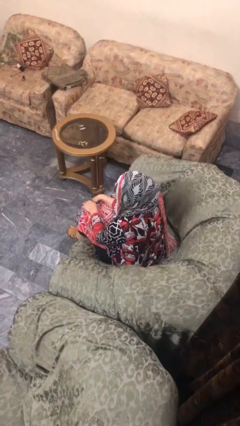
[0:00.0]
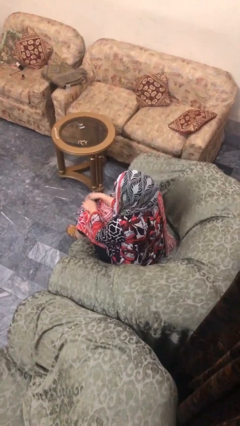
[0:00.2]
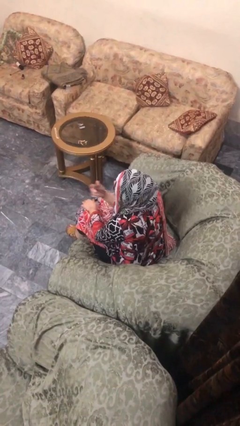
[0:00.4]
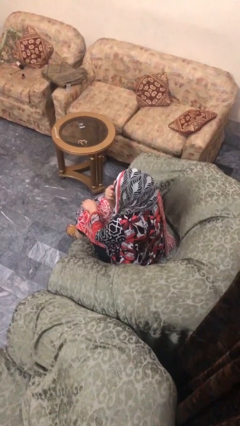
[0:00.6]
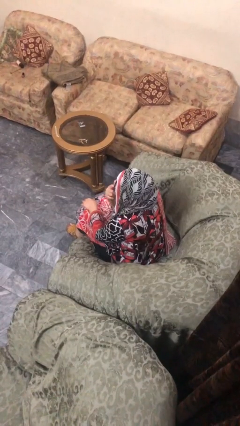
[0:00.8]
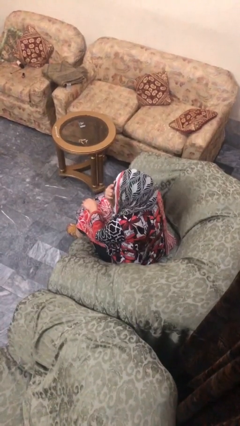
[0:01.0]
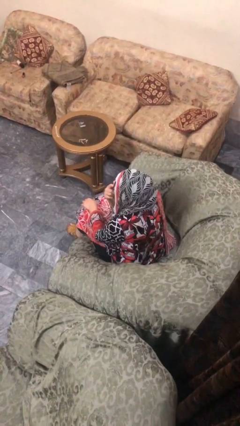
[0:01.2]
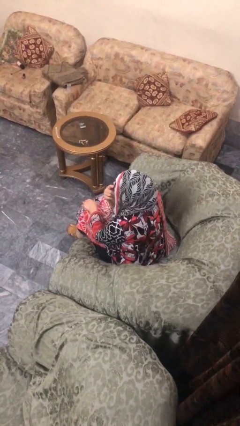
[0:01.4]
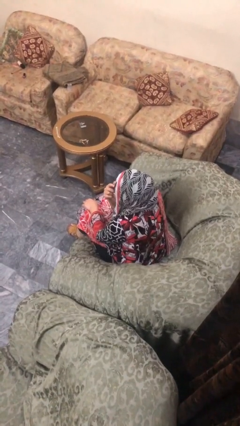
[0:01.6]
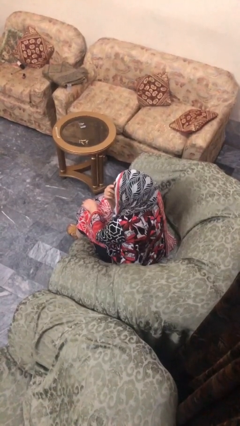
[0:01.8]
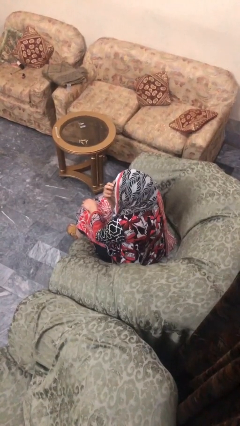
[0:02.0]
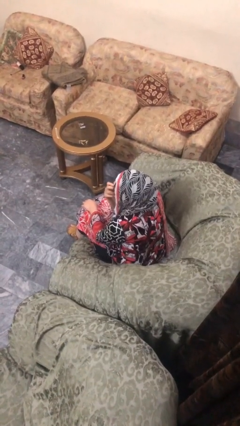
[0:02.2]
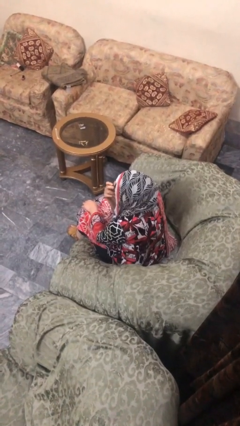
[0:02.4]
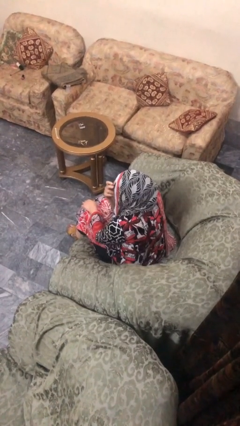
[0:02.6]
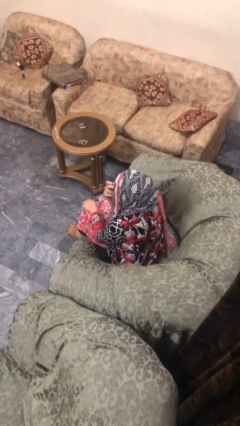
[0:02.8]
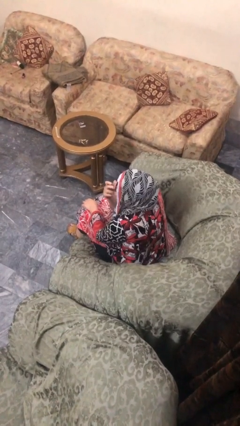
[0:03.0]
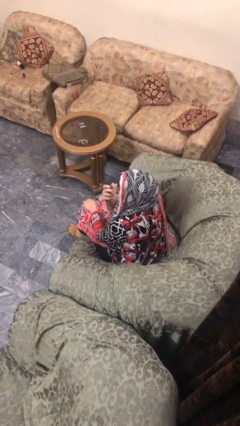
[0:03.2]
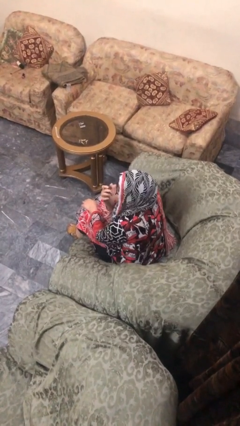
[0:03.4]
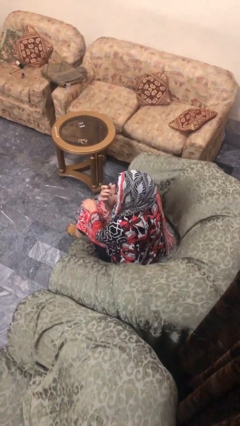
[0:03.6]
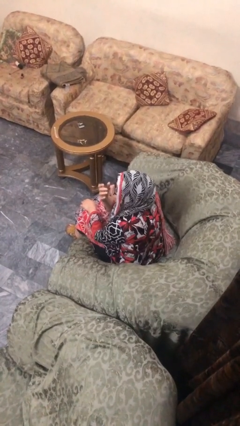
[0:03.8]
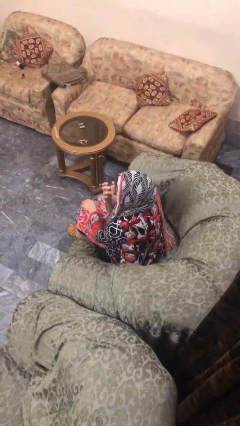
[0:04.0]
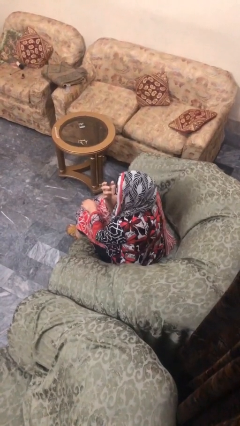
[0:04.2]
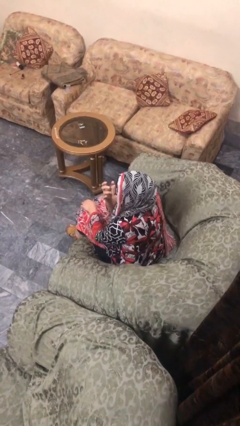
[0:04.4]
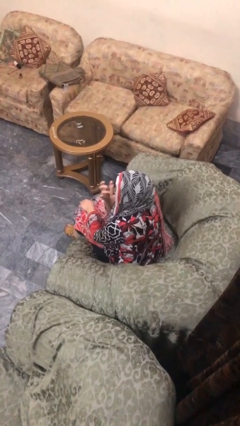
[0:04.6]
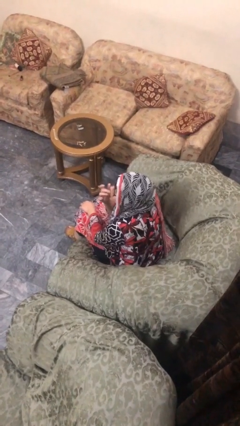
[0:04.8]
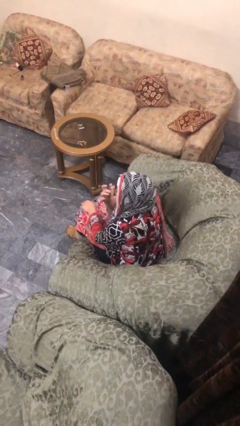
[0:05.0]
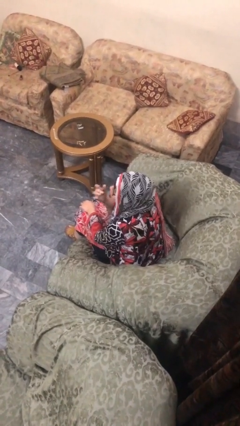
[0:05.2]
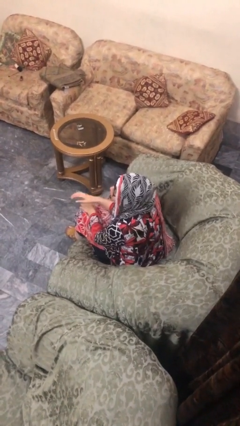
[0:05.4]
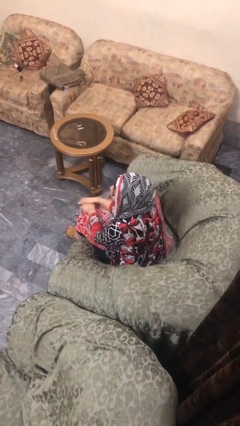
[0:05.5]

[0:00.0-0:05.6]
person licks fingers

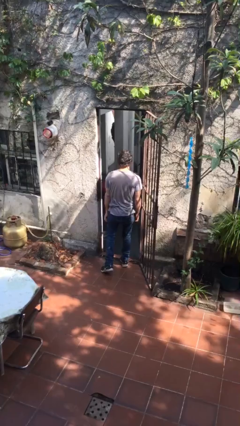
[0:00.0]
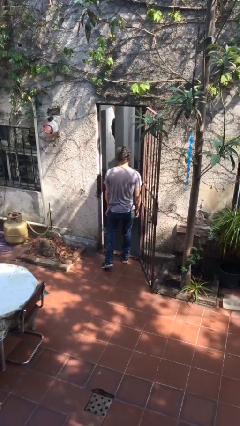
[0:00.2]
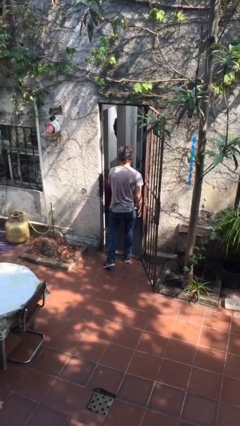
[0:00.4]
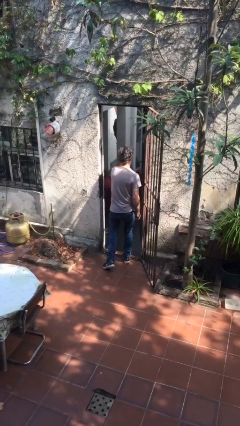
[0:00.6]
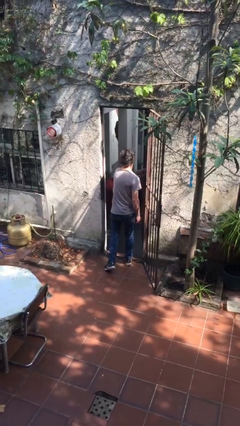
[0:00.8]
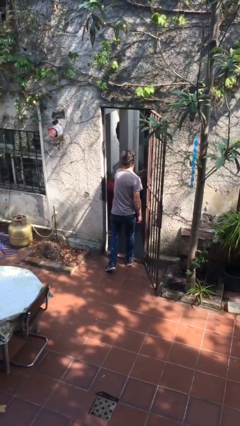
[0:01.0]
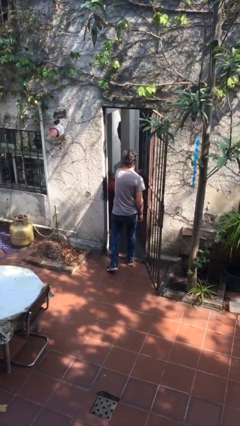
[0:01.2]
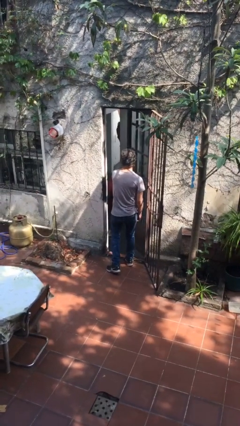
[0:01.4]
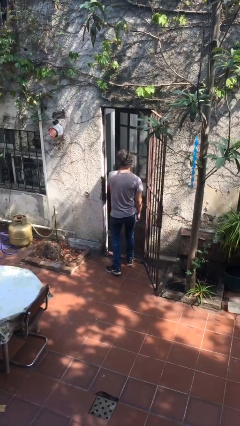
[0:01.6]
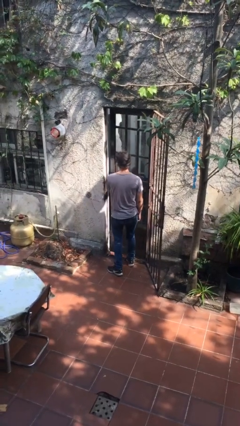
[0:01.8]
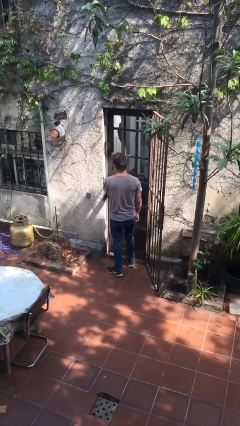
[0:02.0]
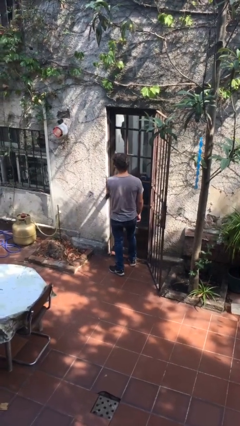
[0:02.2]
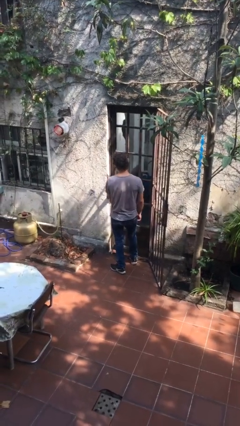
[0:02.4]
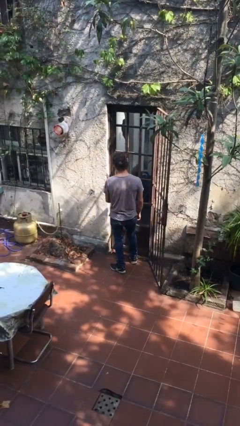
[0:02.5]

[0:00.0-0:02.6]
person closes facility door

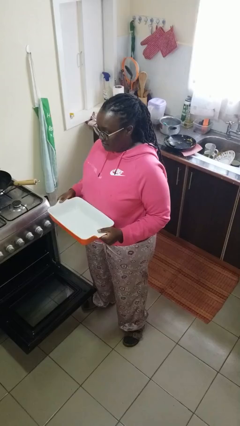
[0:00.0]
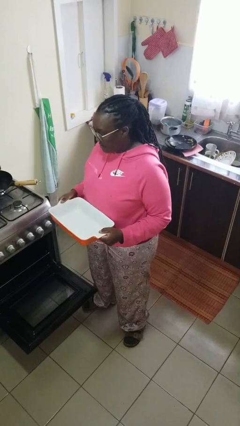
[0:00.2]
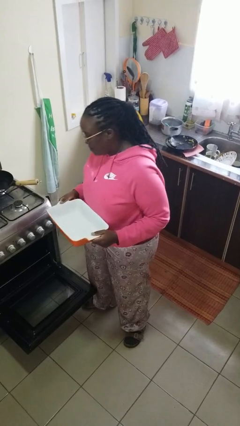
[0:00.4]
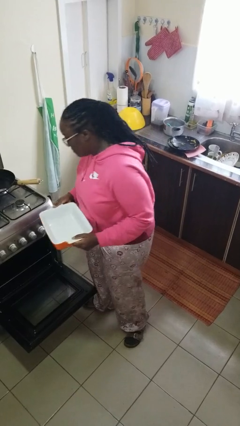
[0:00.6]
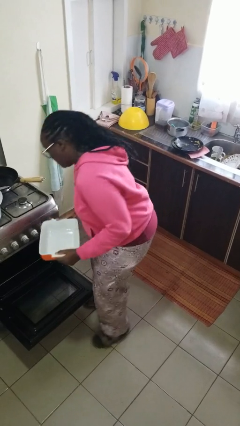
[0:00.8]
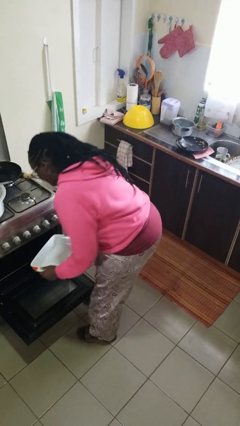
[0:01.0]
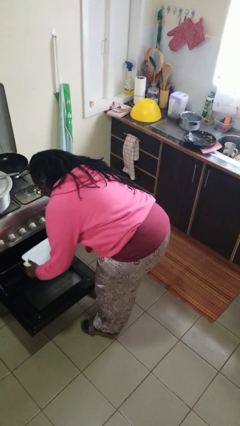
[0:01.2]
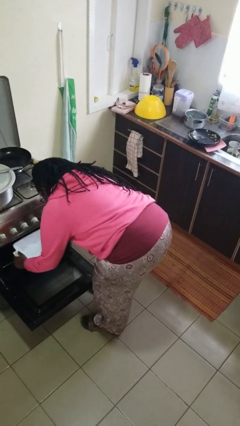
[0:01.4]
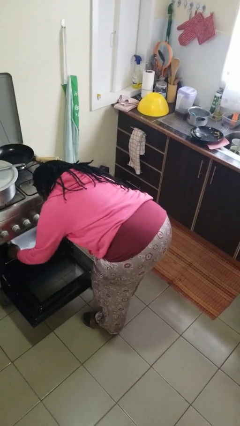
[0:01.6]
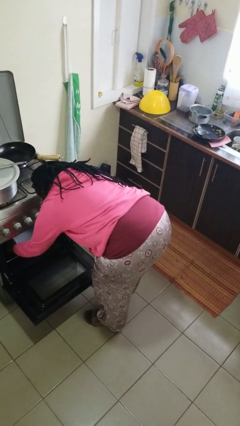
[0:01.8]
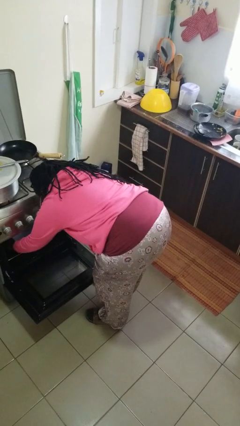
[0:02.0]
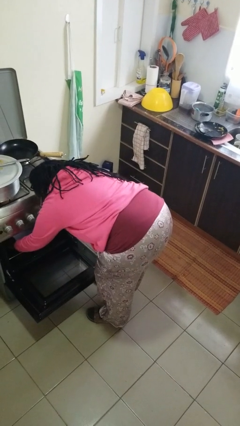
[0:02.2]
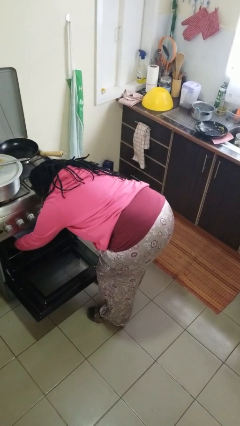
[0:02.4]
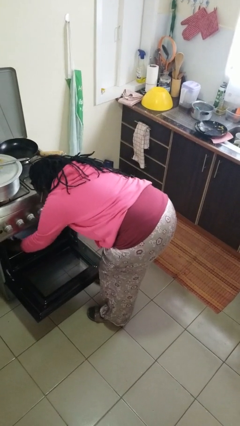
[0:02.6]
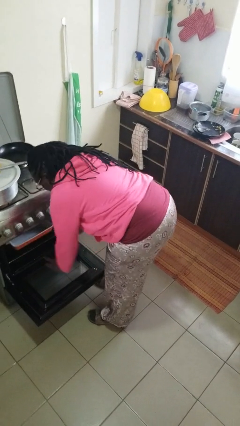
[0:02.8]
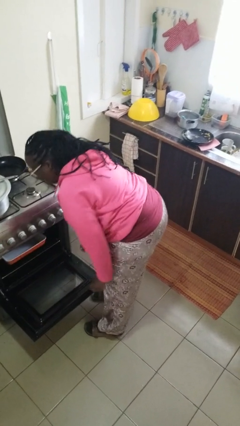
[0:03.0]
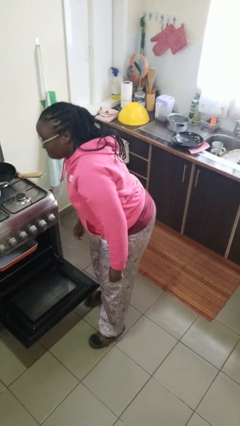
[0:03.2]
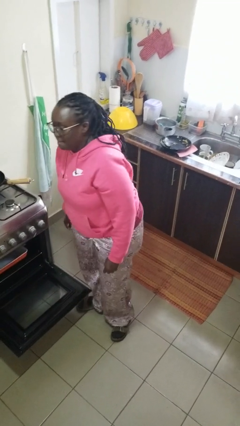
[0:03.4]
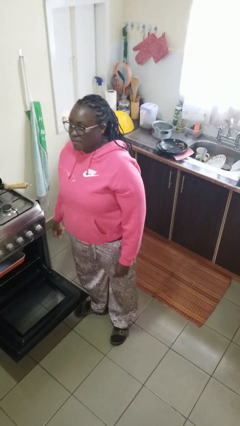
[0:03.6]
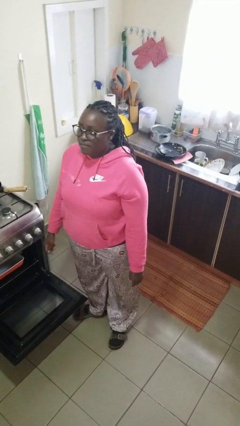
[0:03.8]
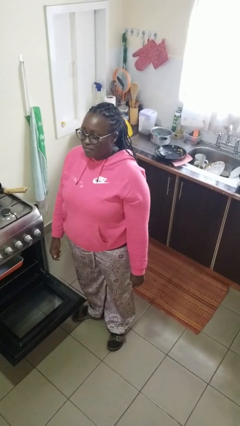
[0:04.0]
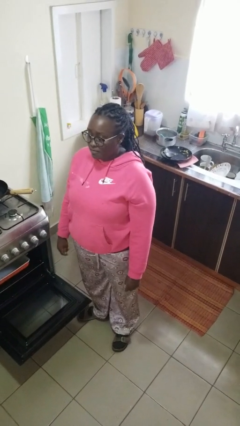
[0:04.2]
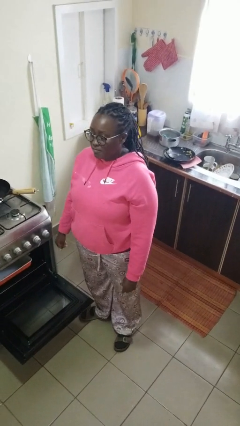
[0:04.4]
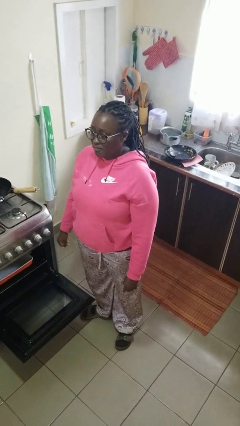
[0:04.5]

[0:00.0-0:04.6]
person puts object into oven

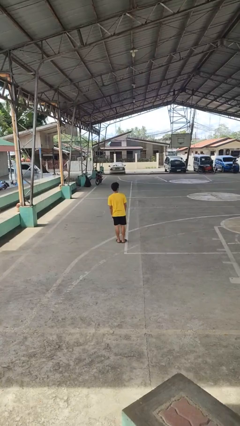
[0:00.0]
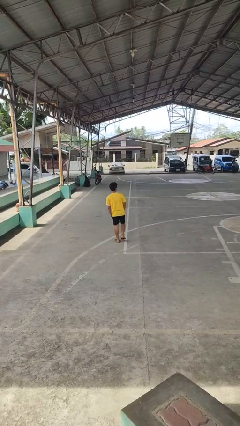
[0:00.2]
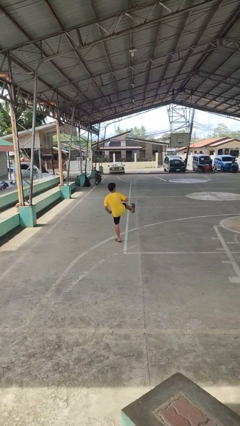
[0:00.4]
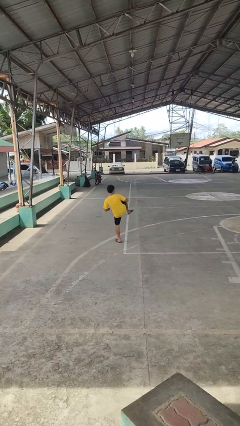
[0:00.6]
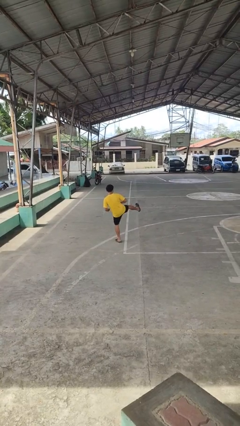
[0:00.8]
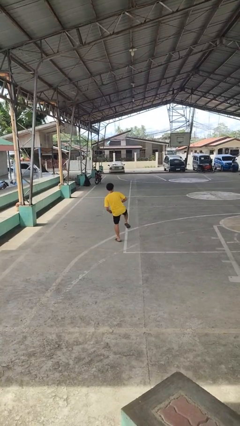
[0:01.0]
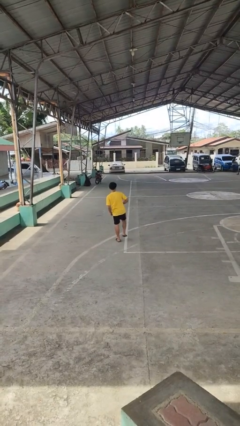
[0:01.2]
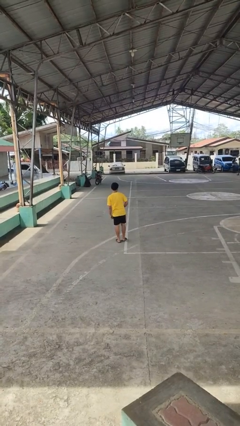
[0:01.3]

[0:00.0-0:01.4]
person karate kicks

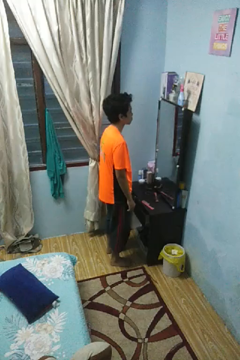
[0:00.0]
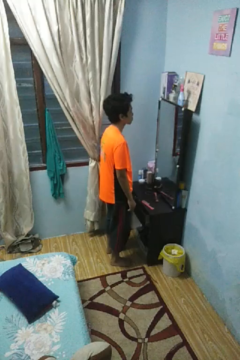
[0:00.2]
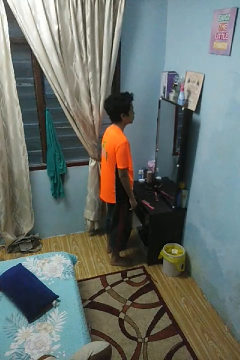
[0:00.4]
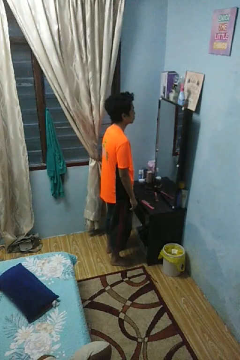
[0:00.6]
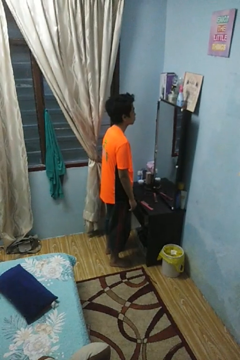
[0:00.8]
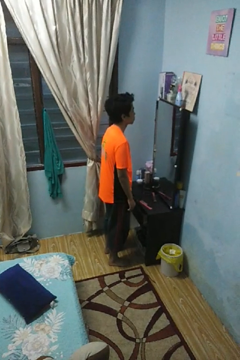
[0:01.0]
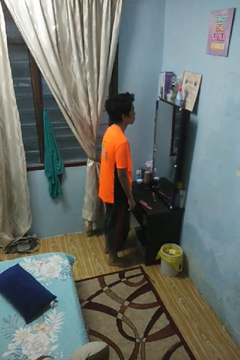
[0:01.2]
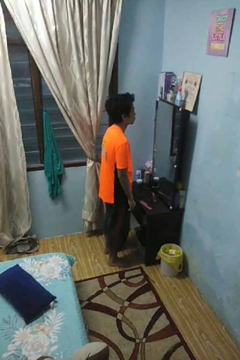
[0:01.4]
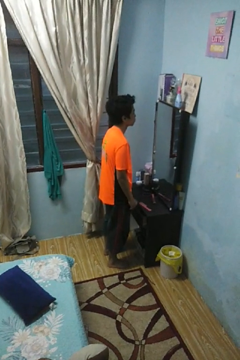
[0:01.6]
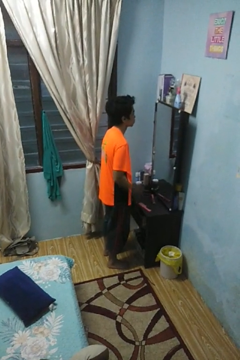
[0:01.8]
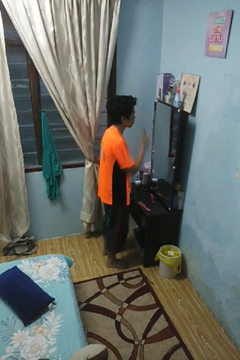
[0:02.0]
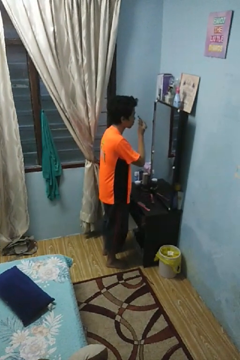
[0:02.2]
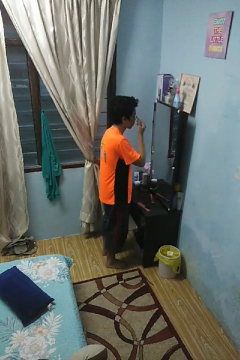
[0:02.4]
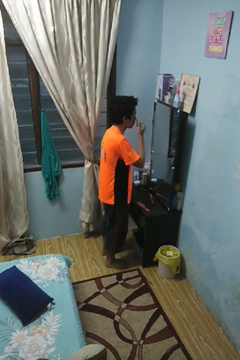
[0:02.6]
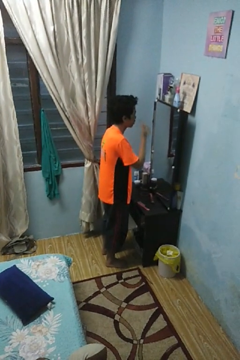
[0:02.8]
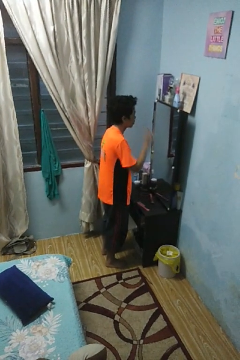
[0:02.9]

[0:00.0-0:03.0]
person applies eye makeup

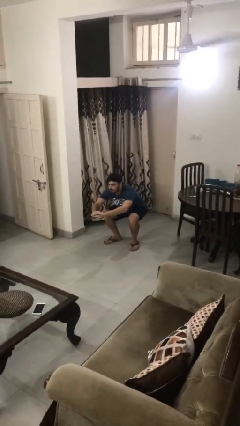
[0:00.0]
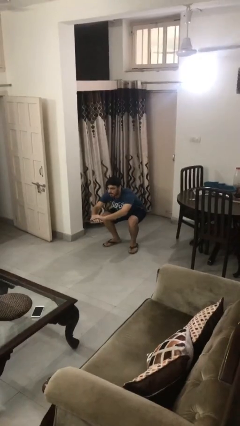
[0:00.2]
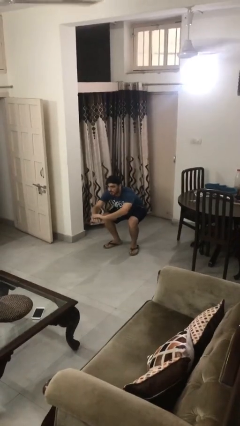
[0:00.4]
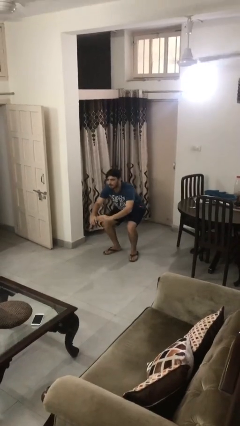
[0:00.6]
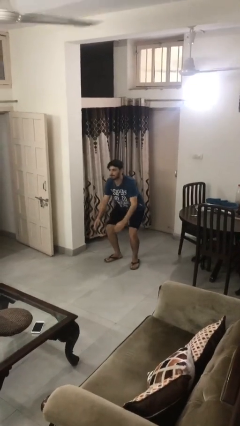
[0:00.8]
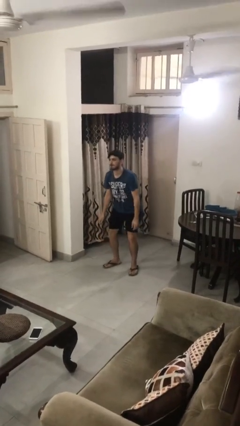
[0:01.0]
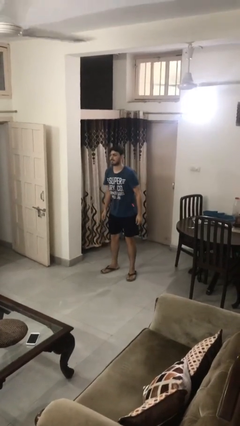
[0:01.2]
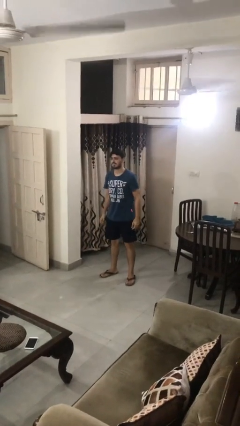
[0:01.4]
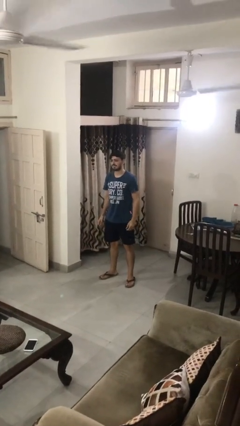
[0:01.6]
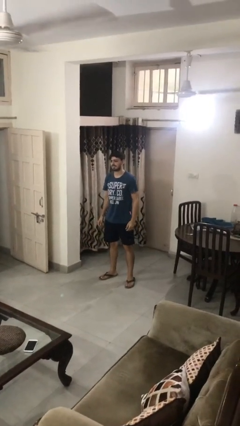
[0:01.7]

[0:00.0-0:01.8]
person stands up
